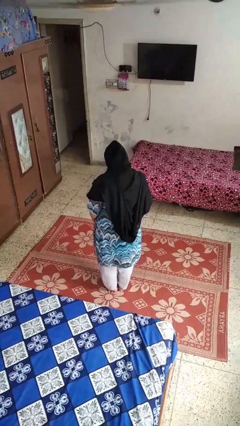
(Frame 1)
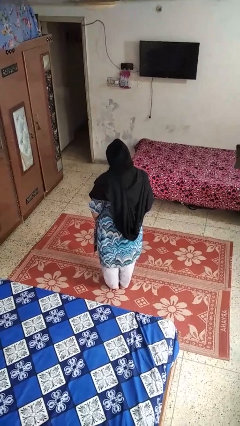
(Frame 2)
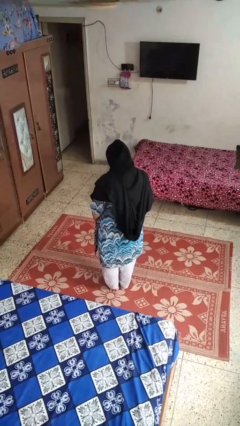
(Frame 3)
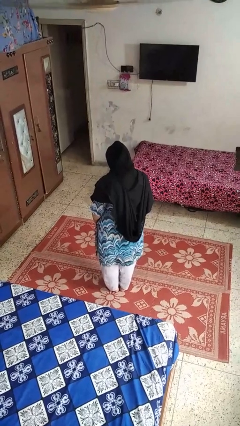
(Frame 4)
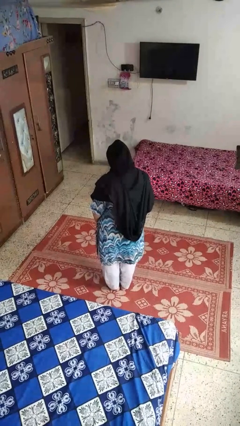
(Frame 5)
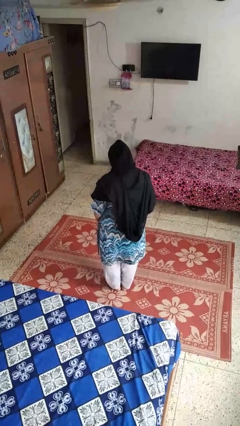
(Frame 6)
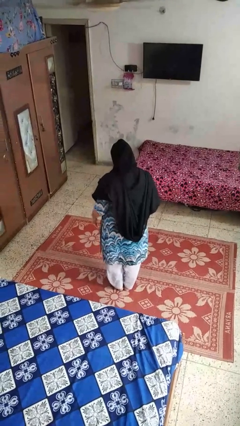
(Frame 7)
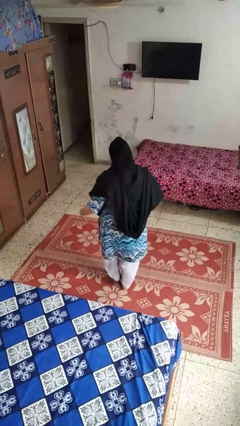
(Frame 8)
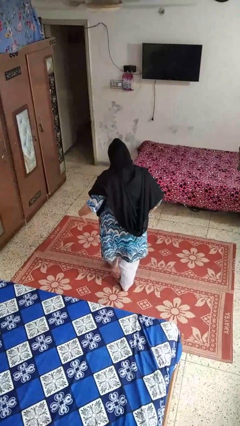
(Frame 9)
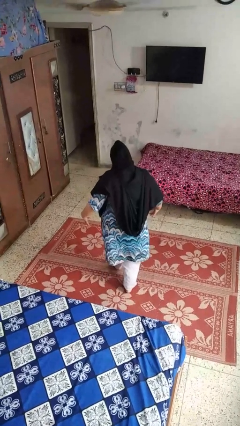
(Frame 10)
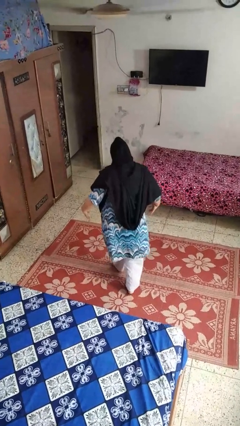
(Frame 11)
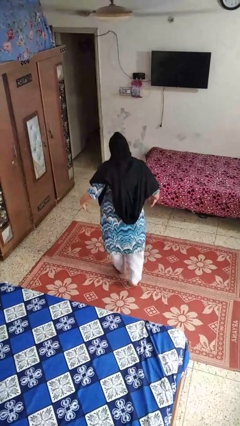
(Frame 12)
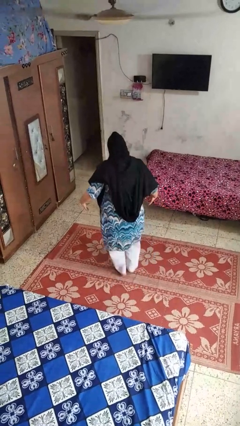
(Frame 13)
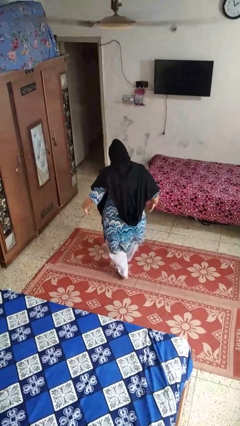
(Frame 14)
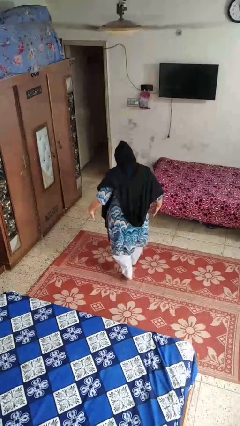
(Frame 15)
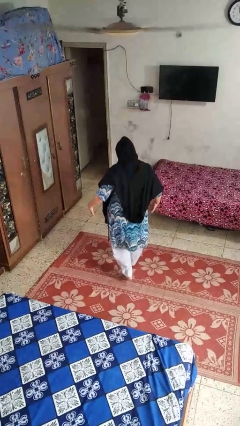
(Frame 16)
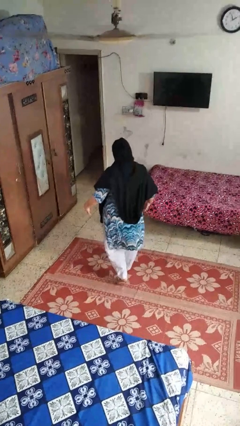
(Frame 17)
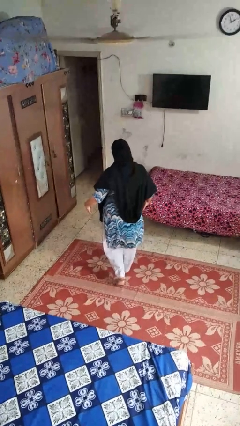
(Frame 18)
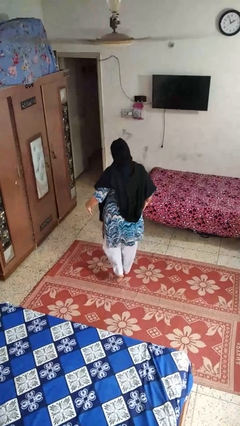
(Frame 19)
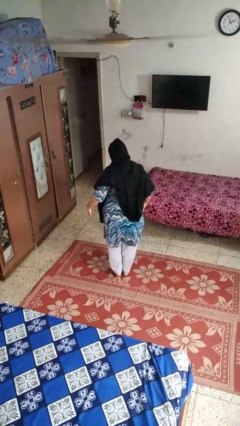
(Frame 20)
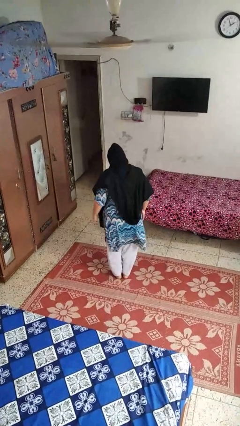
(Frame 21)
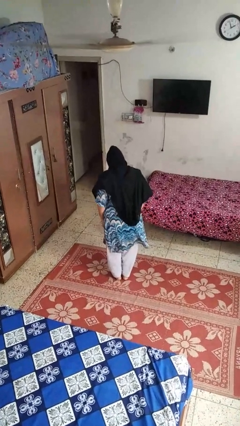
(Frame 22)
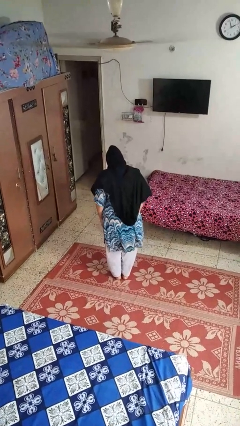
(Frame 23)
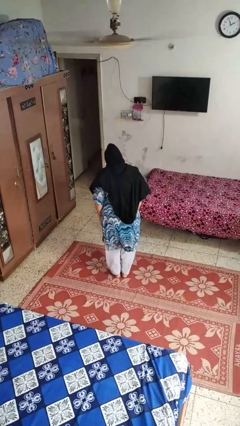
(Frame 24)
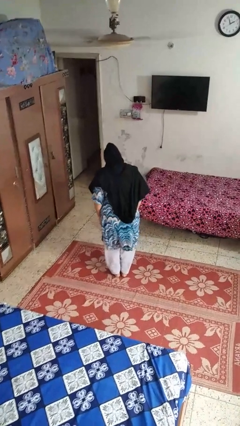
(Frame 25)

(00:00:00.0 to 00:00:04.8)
person walks tiptoe

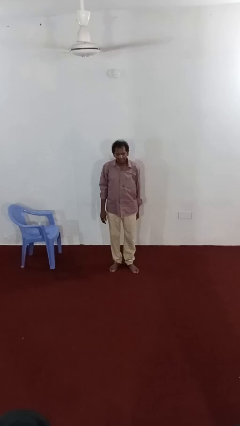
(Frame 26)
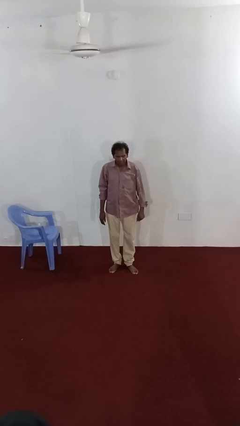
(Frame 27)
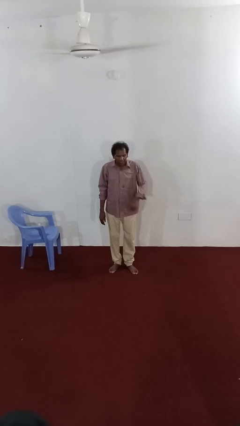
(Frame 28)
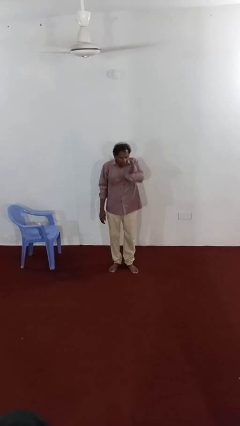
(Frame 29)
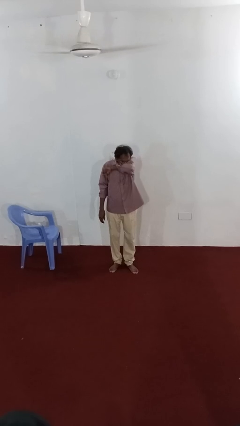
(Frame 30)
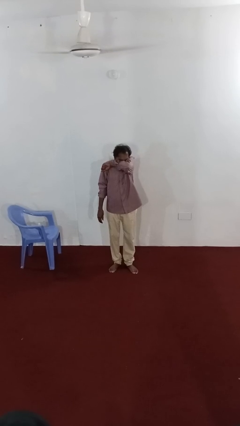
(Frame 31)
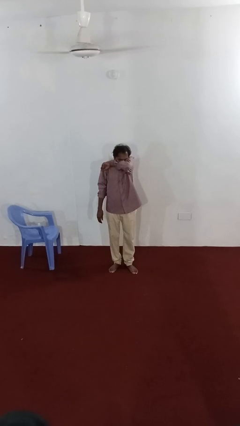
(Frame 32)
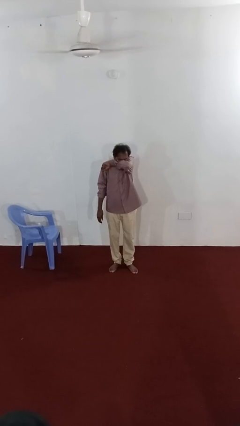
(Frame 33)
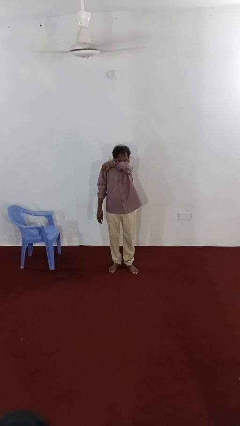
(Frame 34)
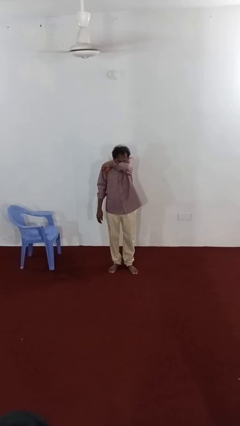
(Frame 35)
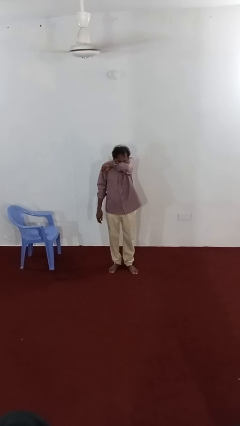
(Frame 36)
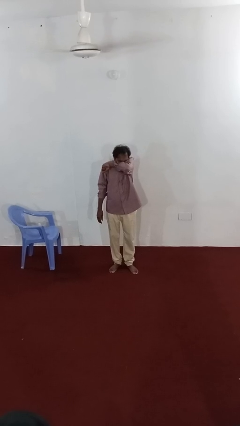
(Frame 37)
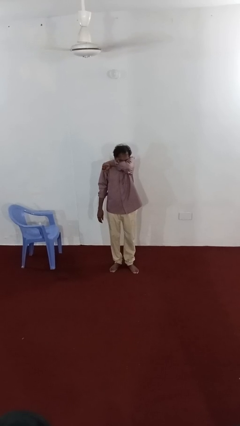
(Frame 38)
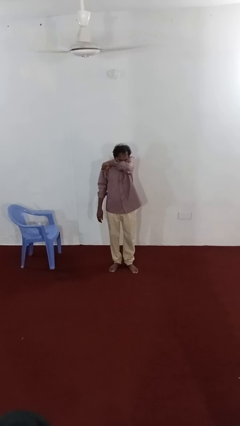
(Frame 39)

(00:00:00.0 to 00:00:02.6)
person sneezes into arm

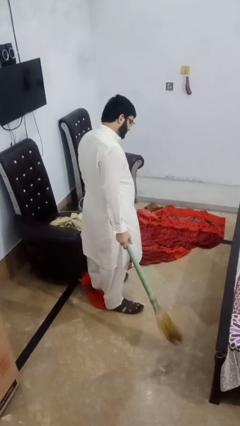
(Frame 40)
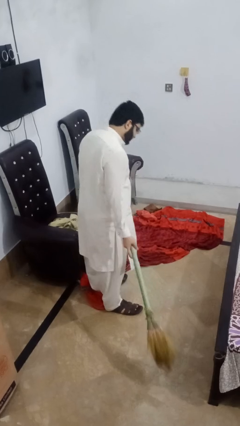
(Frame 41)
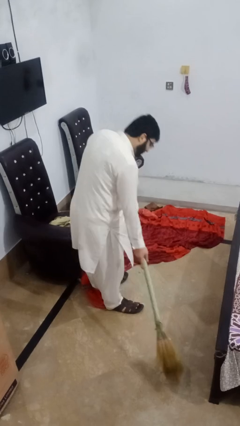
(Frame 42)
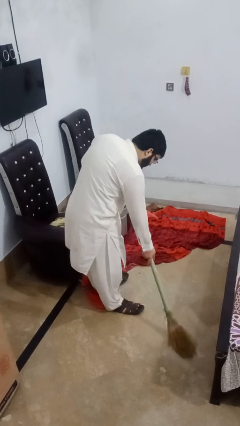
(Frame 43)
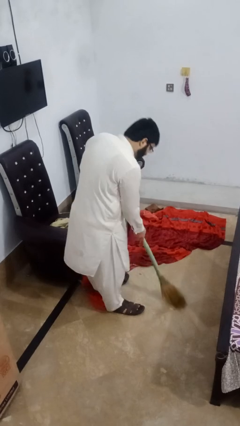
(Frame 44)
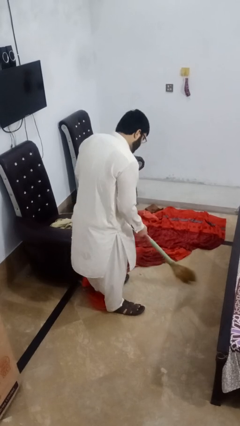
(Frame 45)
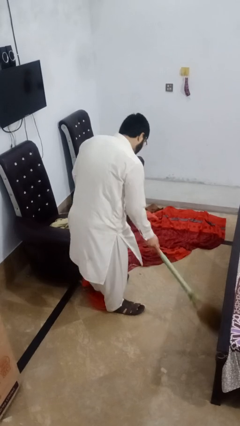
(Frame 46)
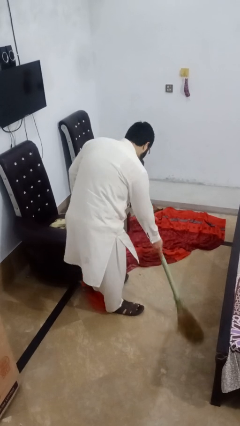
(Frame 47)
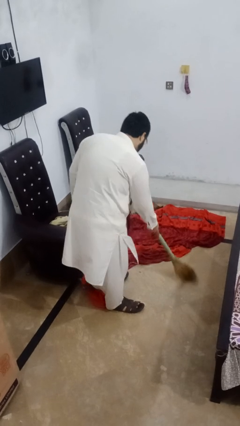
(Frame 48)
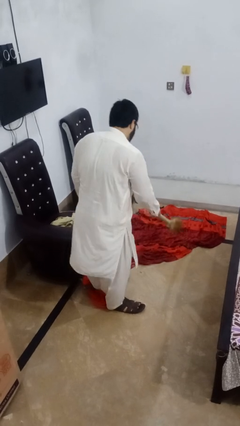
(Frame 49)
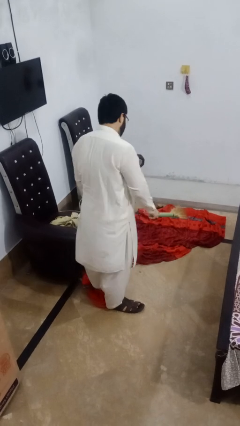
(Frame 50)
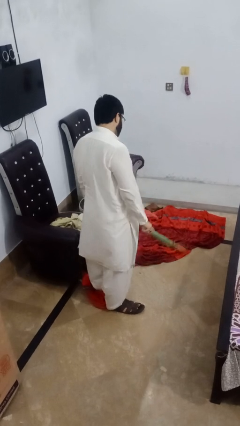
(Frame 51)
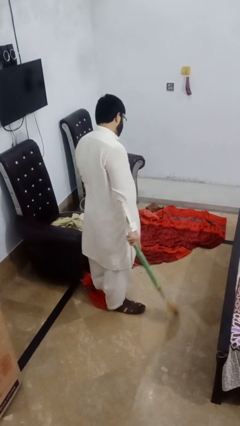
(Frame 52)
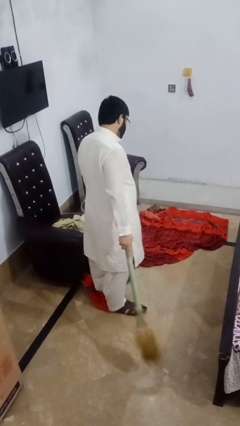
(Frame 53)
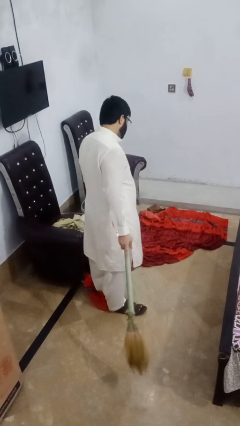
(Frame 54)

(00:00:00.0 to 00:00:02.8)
person sweeps floor

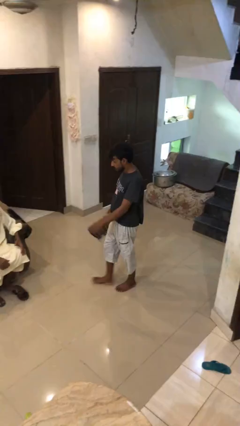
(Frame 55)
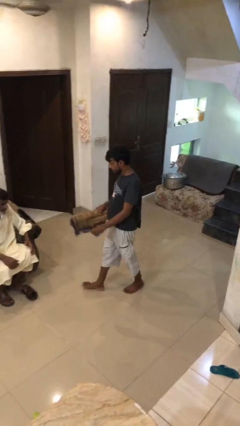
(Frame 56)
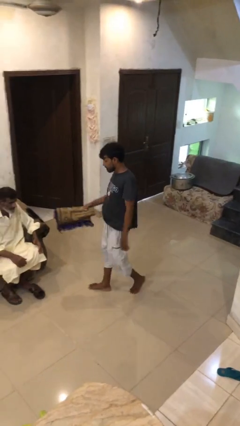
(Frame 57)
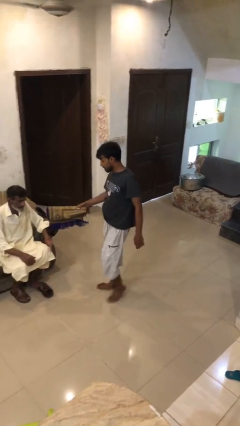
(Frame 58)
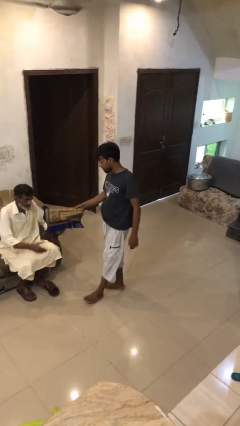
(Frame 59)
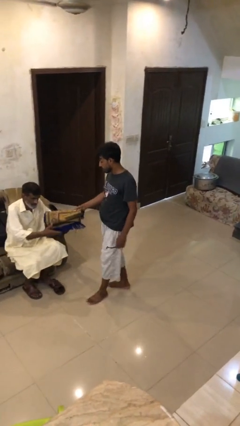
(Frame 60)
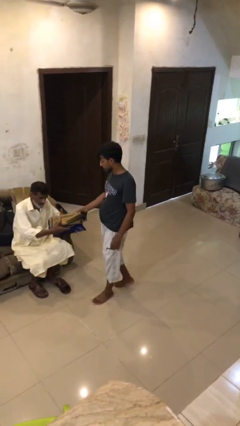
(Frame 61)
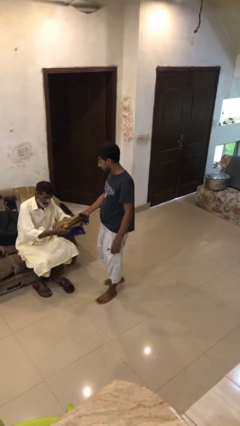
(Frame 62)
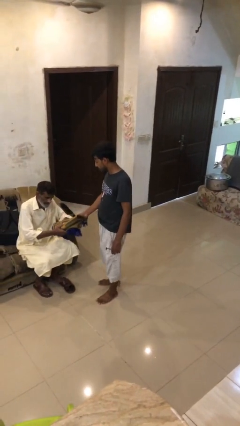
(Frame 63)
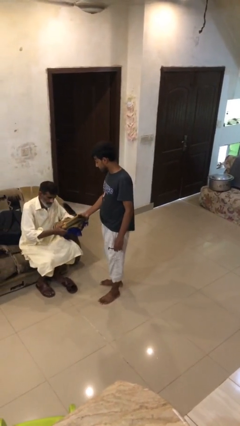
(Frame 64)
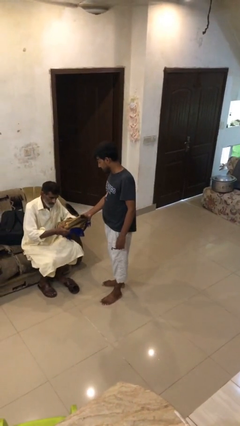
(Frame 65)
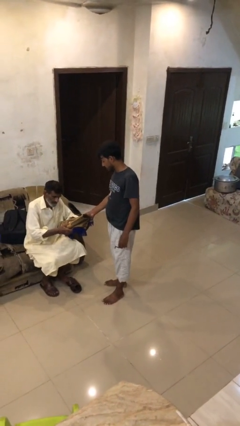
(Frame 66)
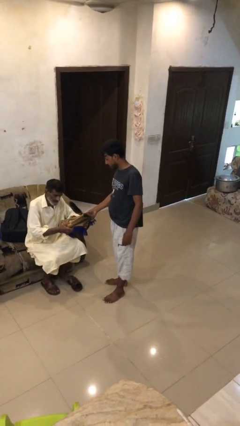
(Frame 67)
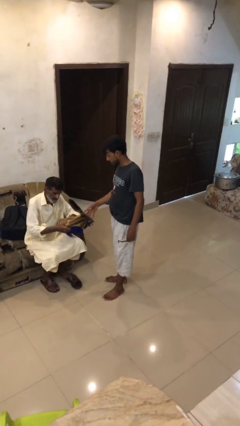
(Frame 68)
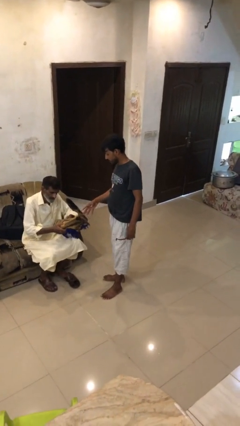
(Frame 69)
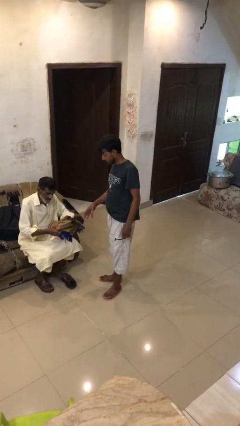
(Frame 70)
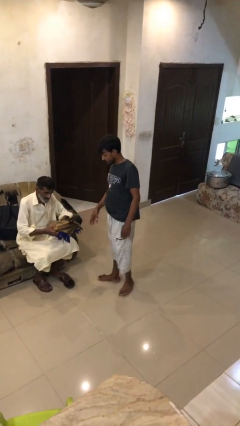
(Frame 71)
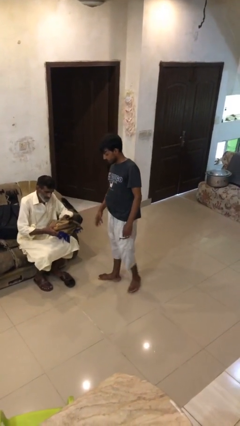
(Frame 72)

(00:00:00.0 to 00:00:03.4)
person transfers object to person

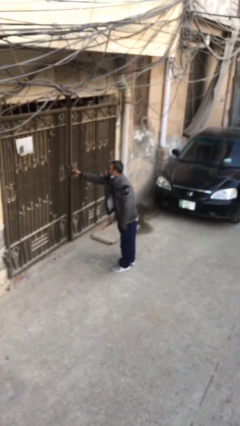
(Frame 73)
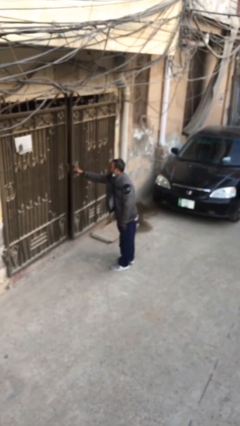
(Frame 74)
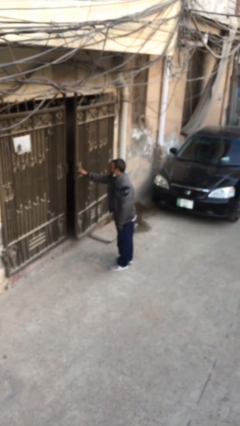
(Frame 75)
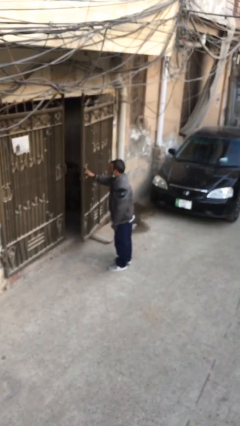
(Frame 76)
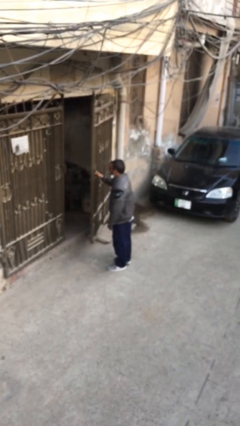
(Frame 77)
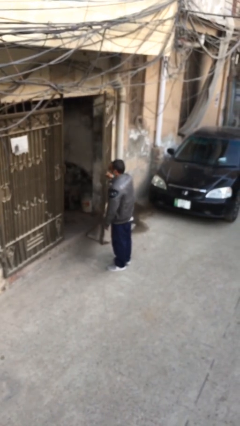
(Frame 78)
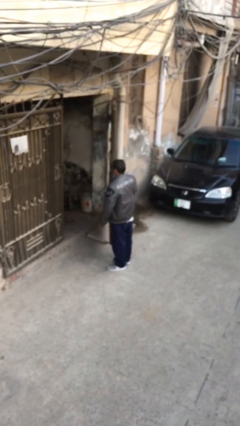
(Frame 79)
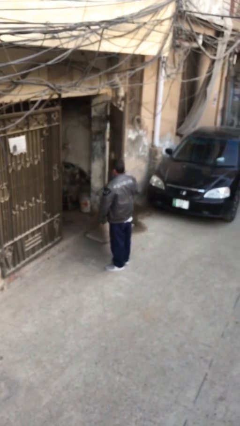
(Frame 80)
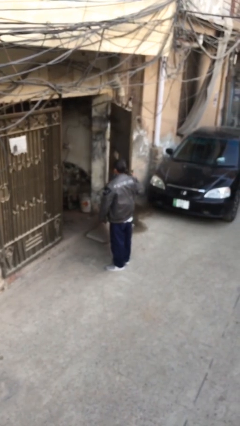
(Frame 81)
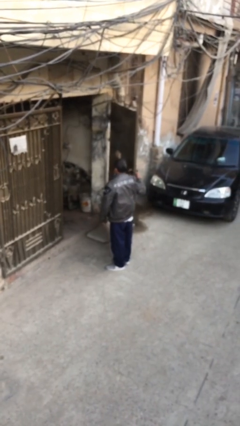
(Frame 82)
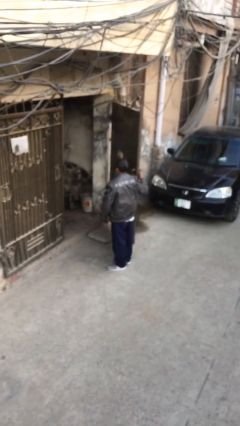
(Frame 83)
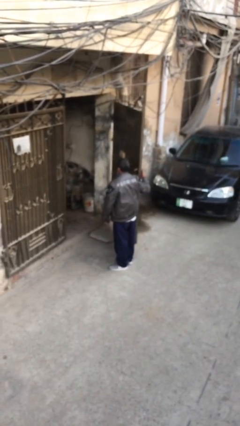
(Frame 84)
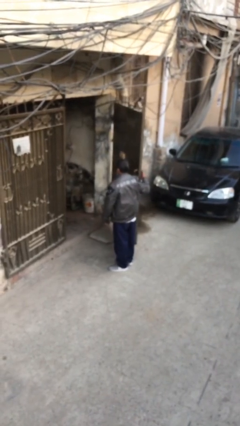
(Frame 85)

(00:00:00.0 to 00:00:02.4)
person opens facility door

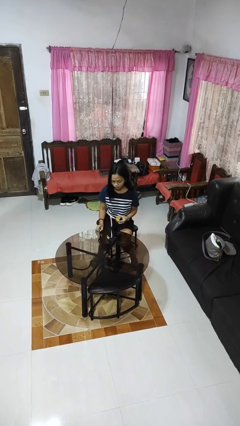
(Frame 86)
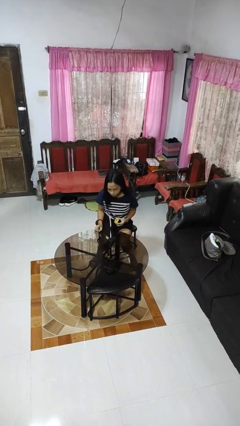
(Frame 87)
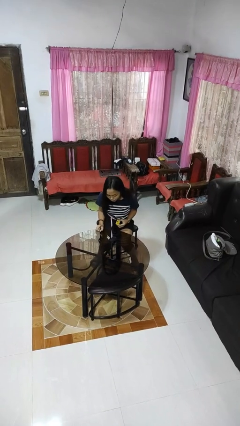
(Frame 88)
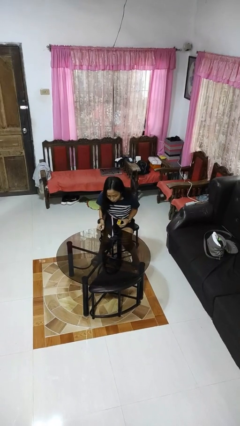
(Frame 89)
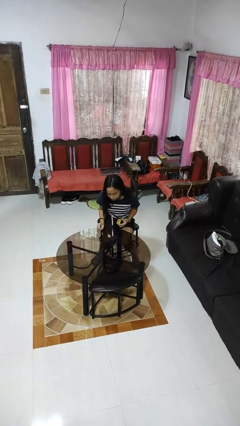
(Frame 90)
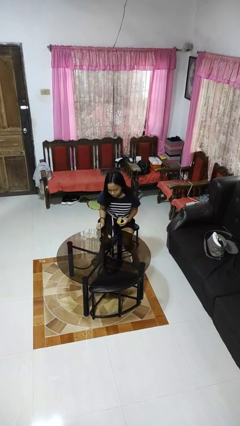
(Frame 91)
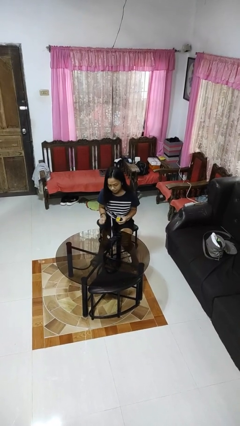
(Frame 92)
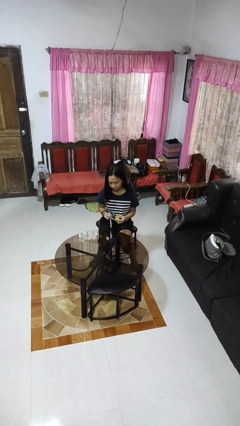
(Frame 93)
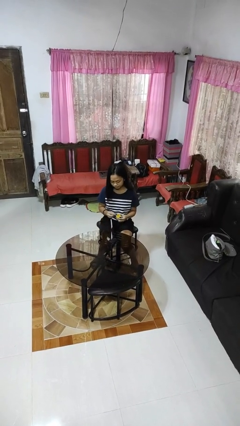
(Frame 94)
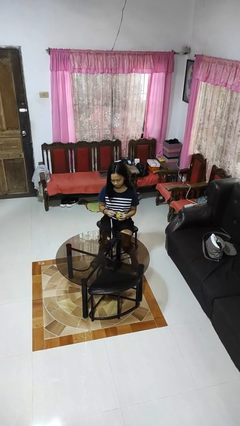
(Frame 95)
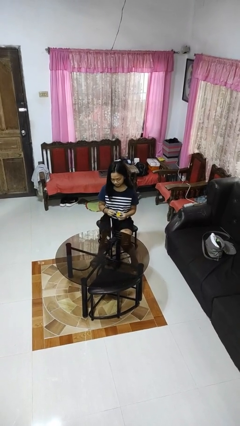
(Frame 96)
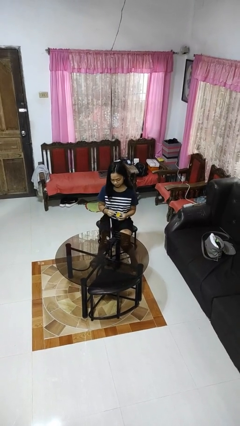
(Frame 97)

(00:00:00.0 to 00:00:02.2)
person extinguishes candle
